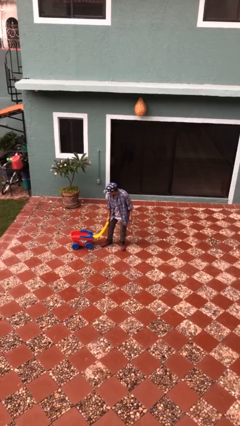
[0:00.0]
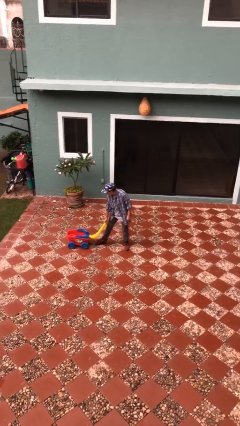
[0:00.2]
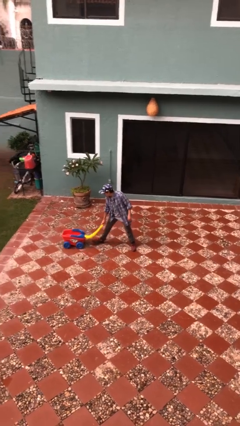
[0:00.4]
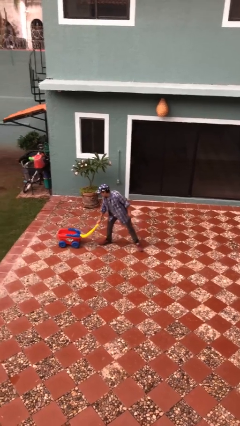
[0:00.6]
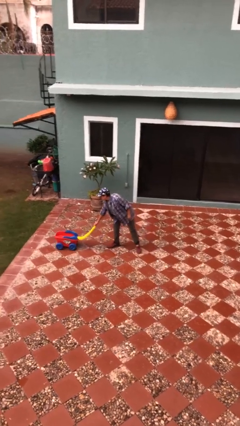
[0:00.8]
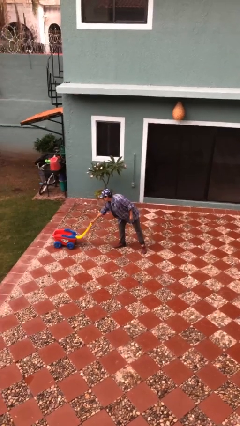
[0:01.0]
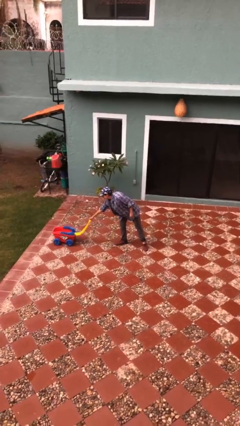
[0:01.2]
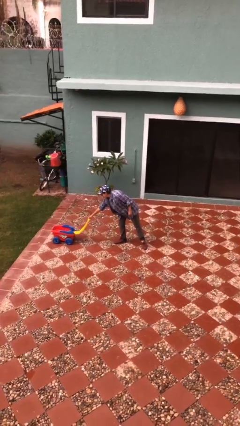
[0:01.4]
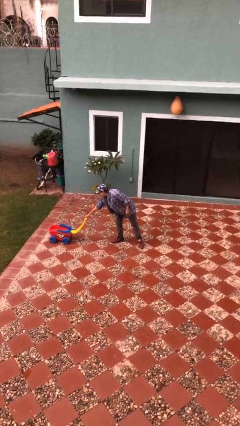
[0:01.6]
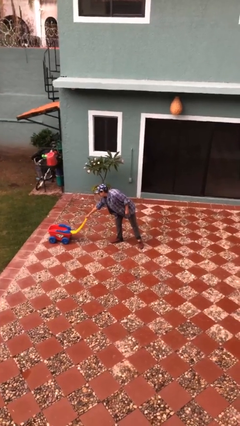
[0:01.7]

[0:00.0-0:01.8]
person pushes wheeled cart

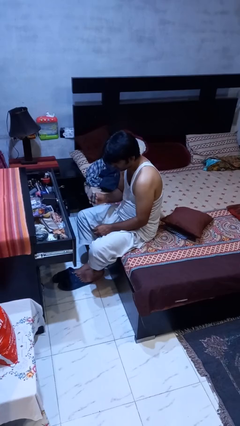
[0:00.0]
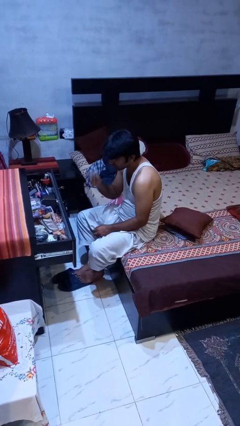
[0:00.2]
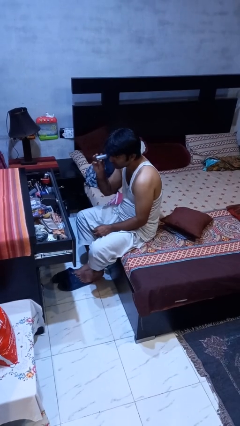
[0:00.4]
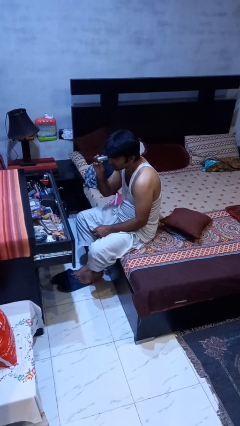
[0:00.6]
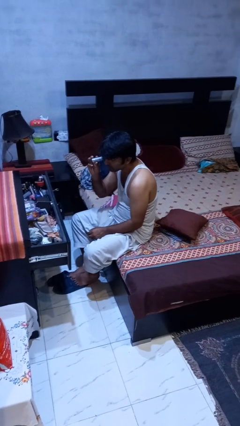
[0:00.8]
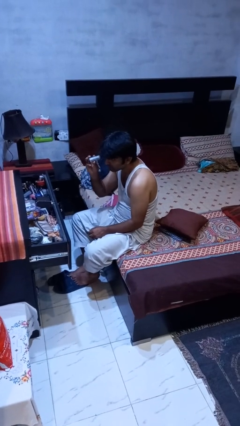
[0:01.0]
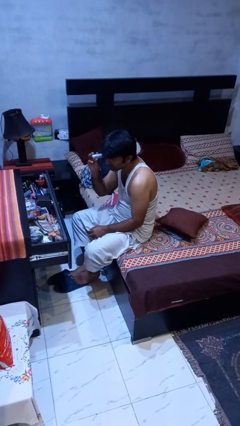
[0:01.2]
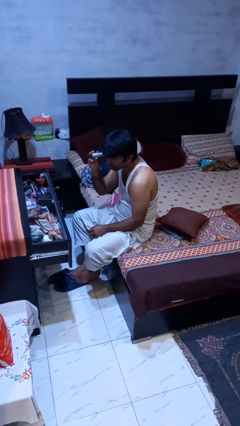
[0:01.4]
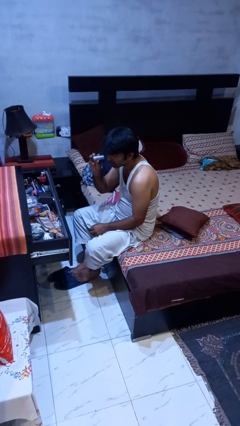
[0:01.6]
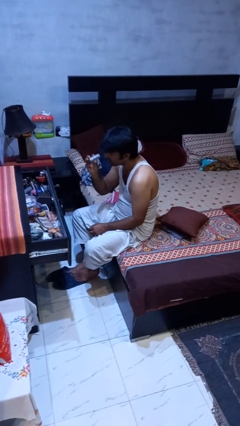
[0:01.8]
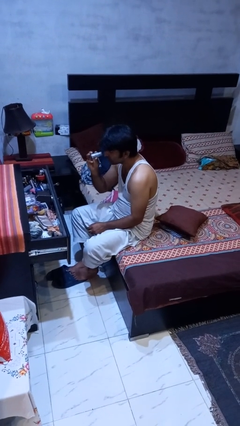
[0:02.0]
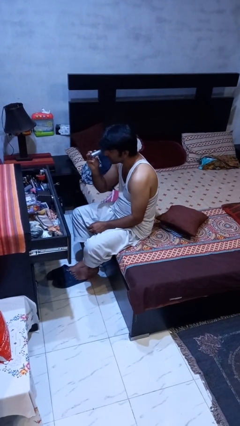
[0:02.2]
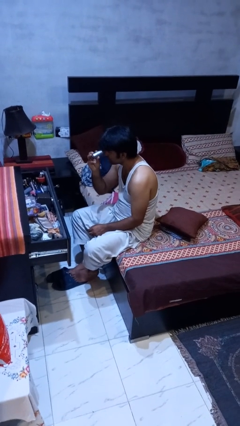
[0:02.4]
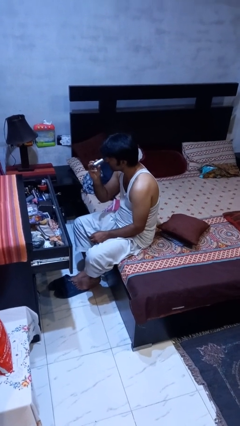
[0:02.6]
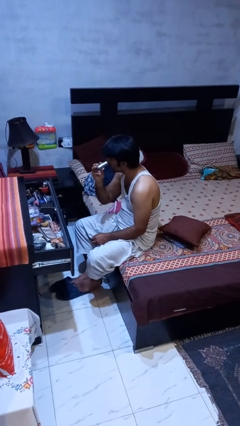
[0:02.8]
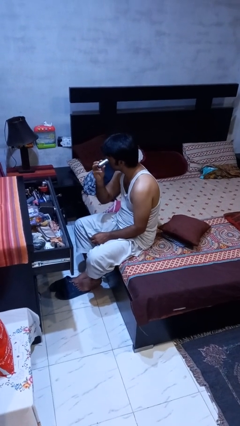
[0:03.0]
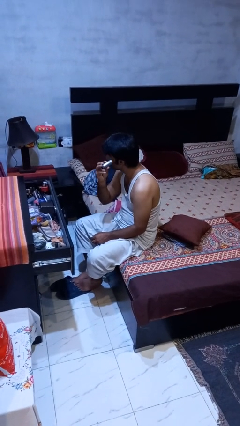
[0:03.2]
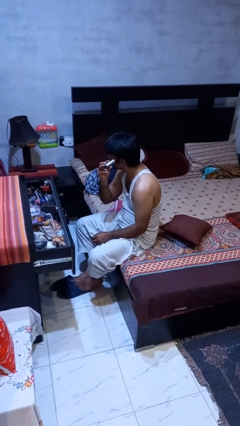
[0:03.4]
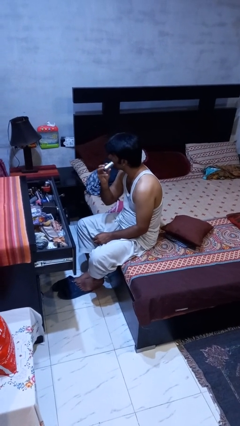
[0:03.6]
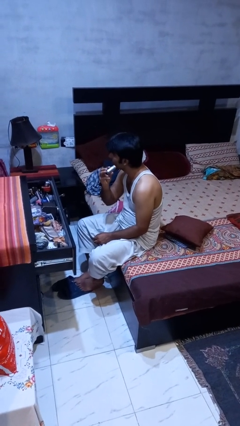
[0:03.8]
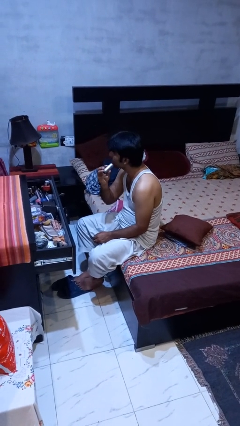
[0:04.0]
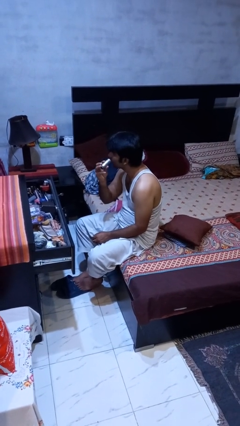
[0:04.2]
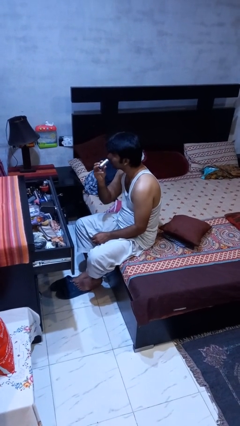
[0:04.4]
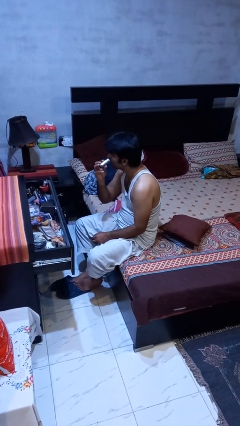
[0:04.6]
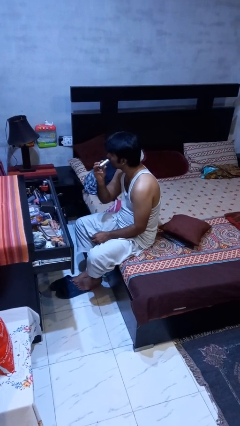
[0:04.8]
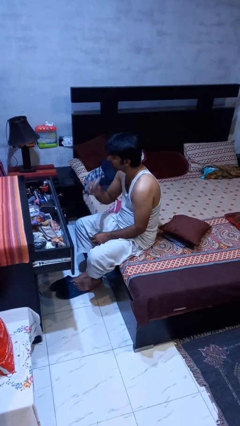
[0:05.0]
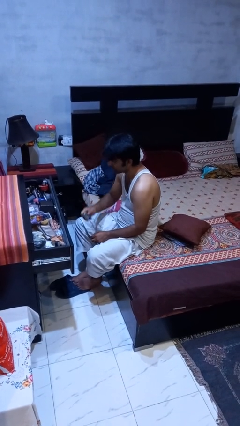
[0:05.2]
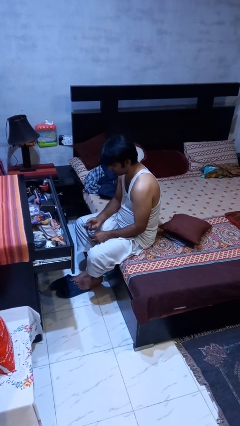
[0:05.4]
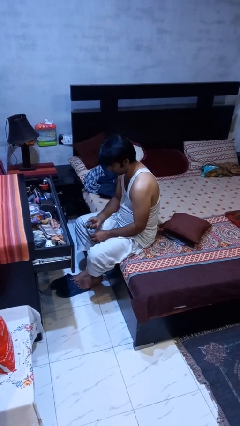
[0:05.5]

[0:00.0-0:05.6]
person applies foundation makeup

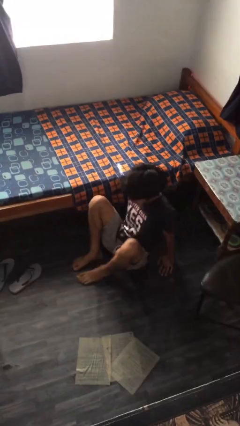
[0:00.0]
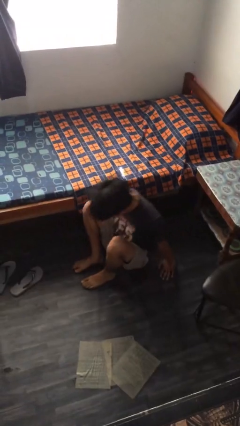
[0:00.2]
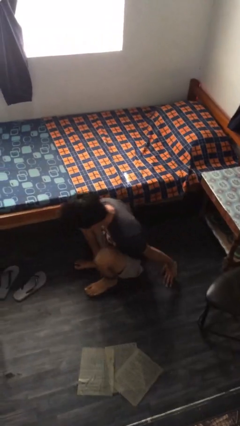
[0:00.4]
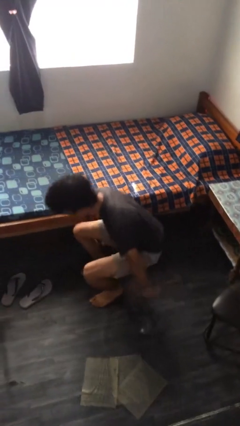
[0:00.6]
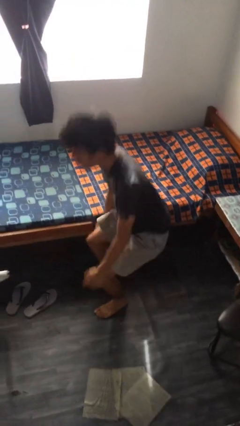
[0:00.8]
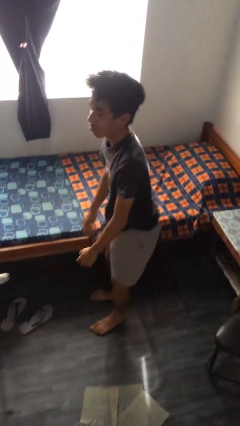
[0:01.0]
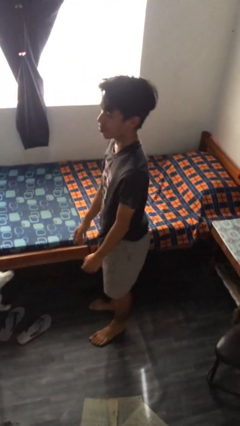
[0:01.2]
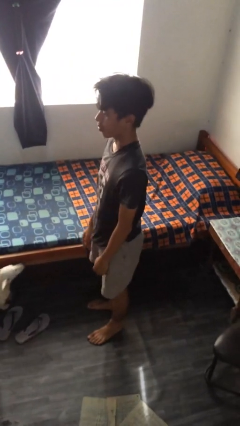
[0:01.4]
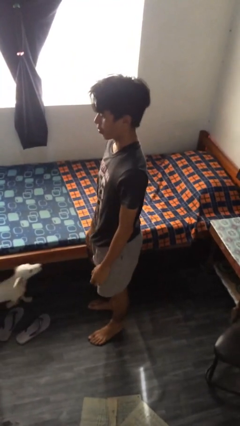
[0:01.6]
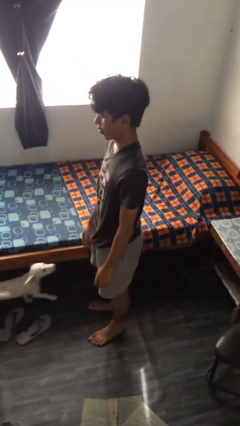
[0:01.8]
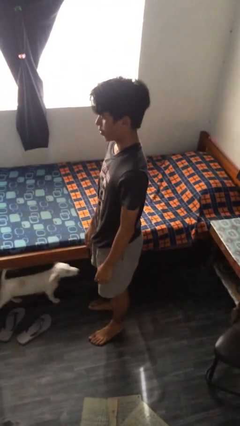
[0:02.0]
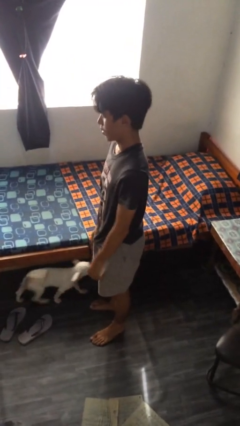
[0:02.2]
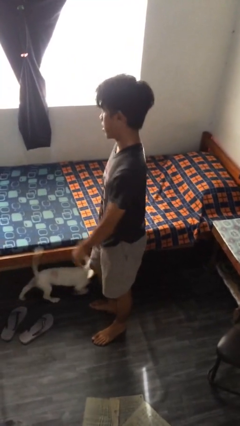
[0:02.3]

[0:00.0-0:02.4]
person stands up from floor

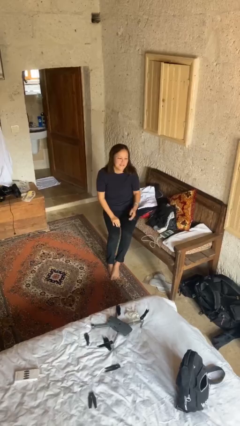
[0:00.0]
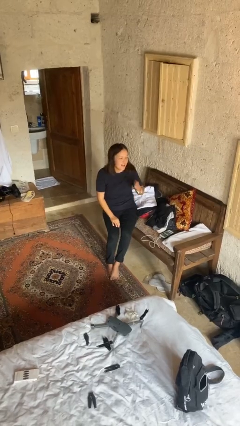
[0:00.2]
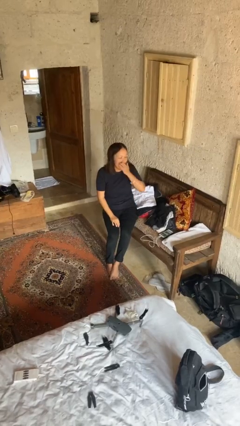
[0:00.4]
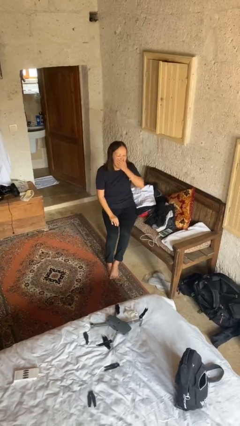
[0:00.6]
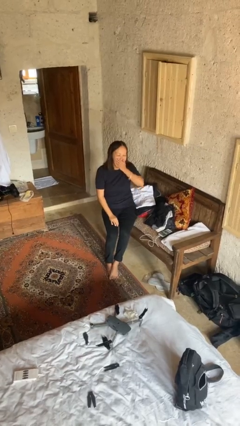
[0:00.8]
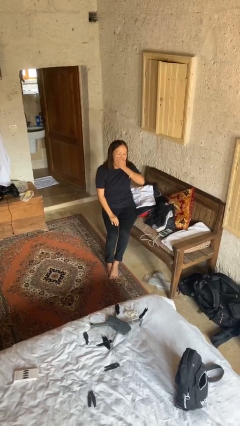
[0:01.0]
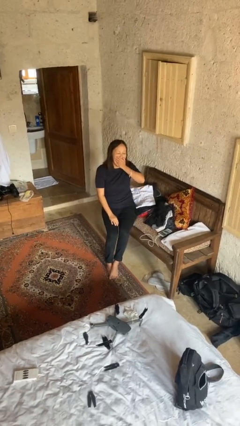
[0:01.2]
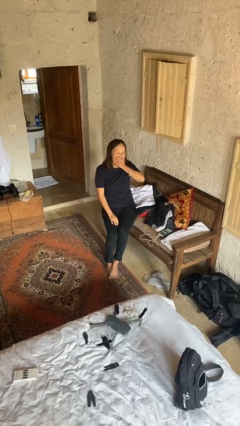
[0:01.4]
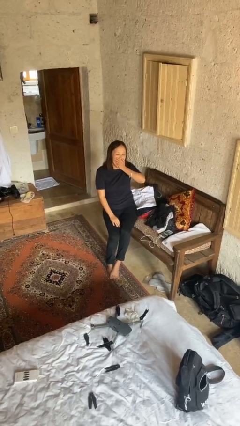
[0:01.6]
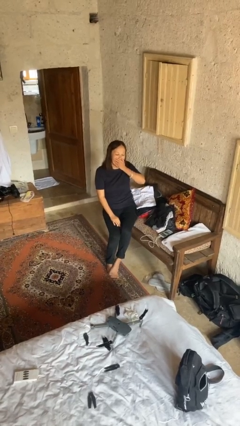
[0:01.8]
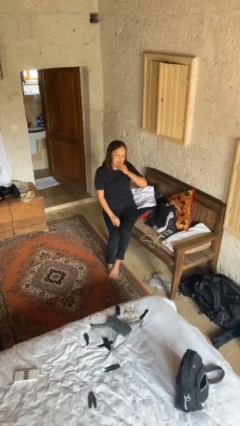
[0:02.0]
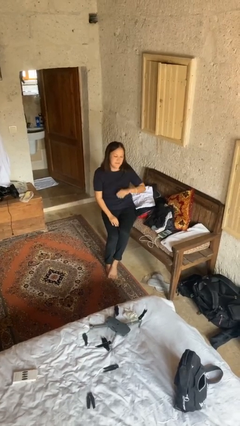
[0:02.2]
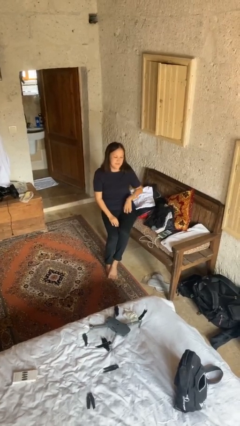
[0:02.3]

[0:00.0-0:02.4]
person yawns

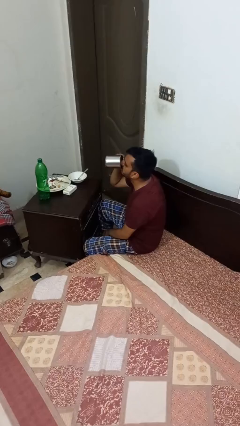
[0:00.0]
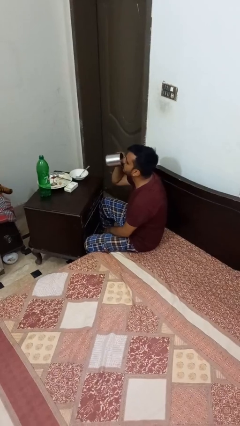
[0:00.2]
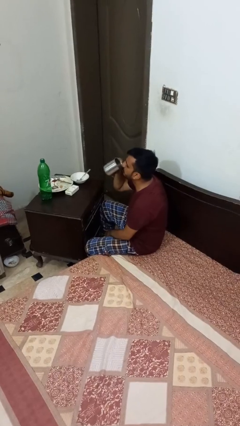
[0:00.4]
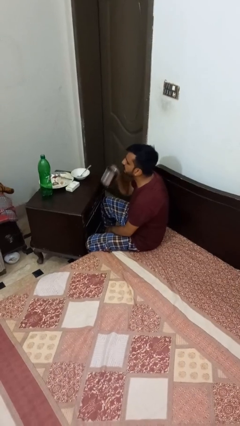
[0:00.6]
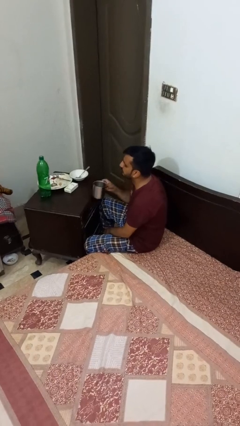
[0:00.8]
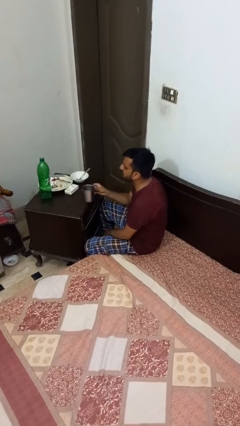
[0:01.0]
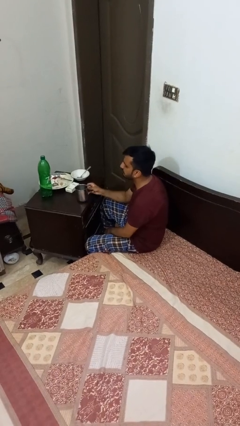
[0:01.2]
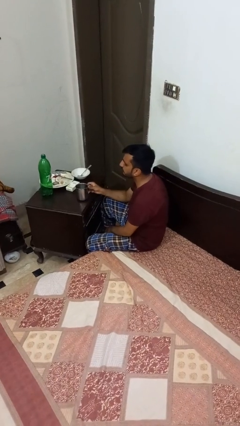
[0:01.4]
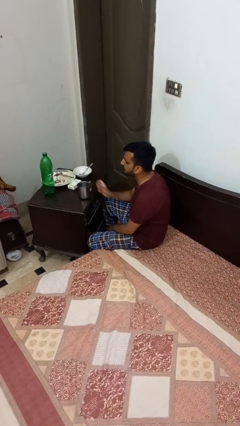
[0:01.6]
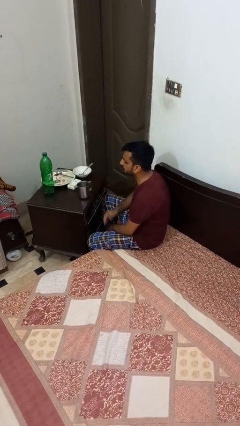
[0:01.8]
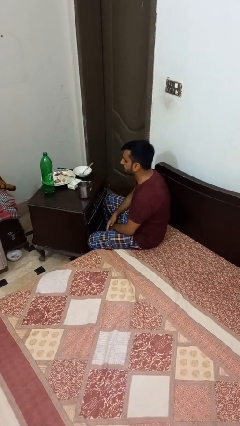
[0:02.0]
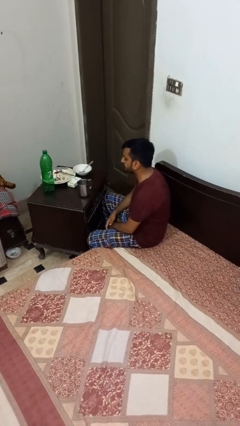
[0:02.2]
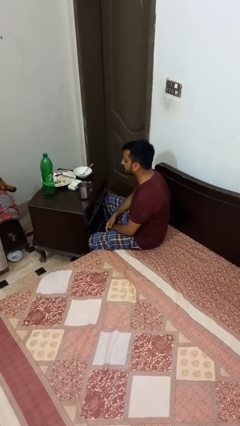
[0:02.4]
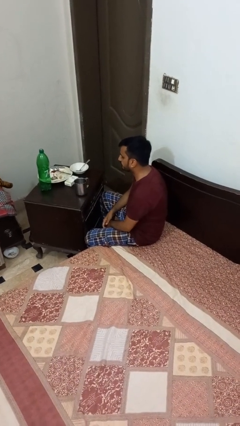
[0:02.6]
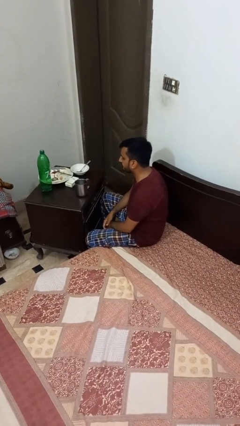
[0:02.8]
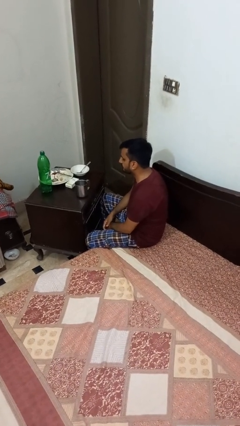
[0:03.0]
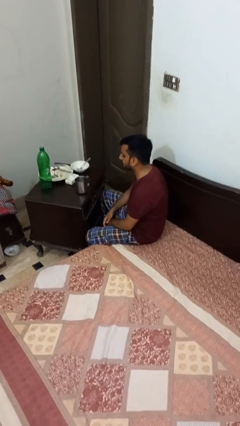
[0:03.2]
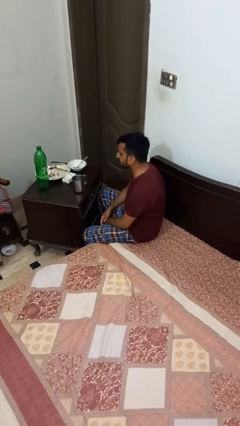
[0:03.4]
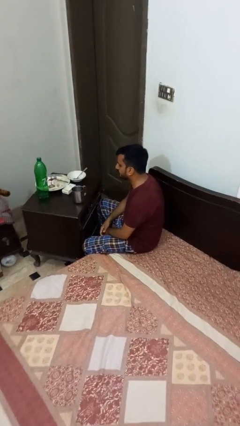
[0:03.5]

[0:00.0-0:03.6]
person puts down object on table

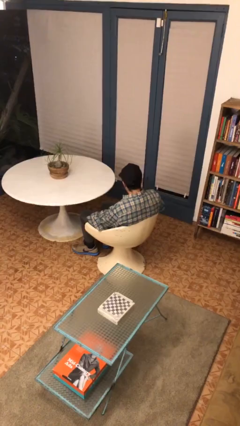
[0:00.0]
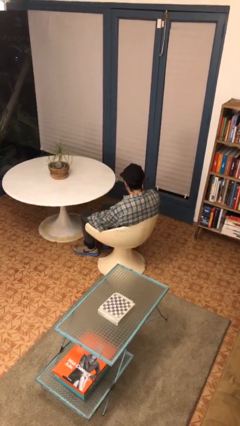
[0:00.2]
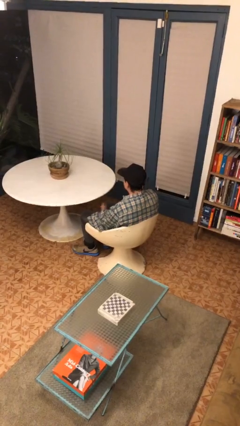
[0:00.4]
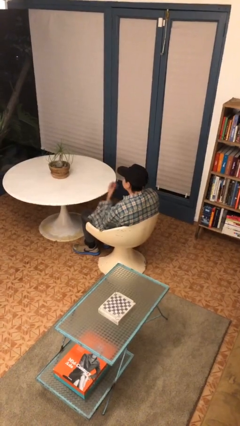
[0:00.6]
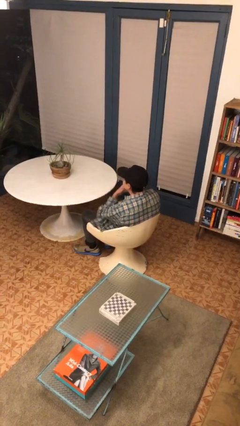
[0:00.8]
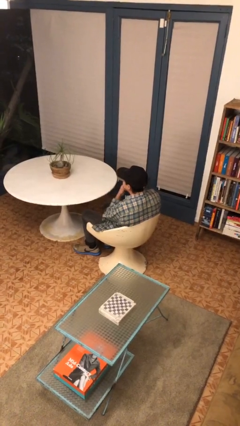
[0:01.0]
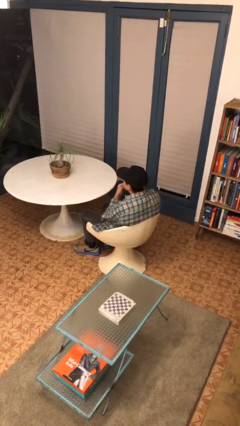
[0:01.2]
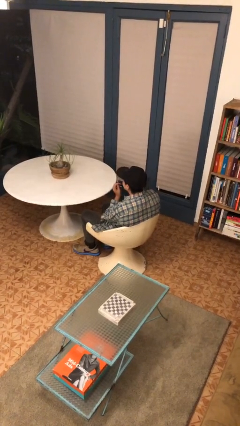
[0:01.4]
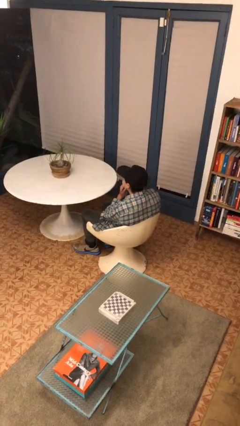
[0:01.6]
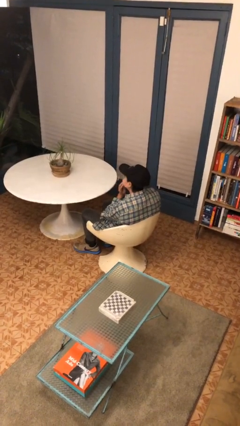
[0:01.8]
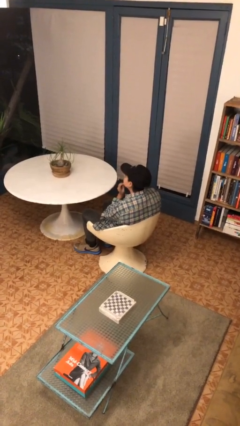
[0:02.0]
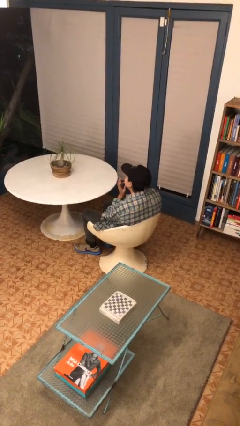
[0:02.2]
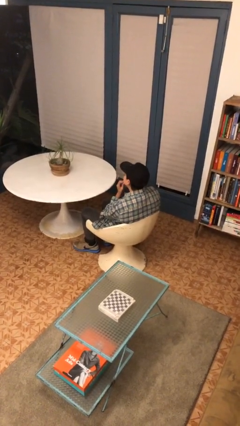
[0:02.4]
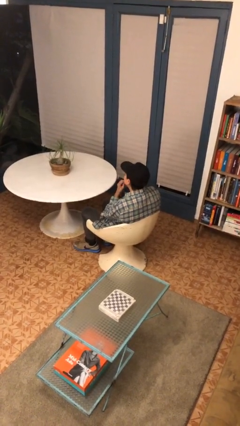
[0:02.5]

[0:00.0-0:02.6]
person strokes chin
